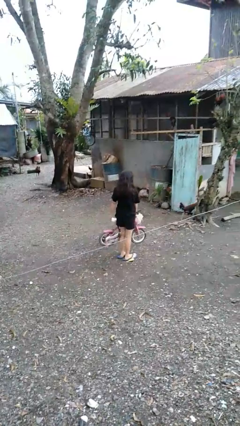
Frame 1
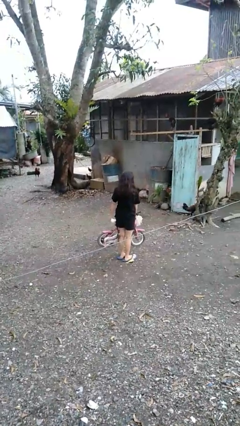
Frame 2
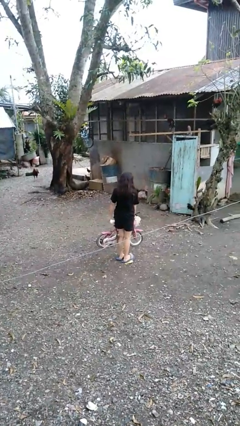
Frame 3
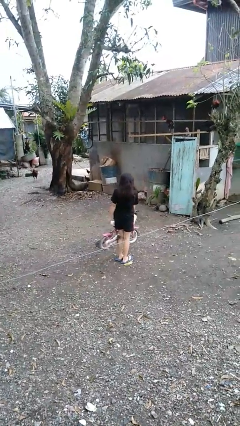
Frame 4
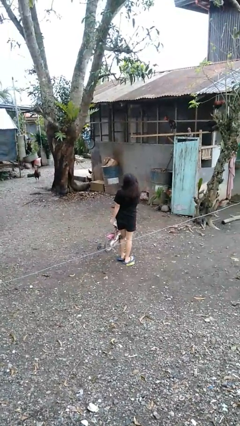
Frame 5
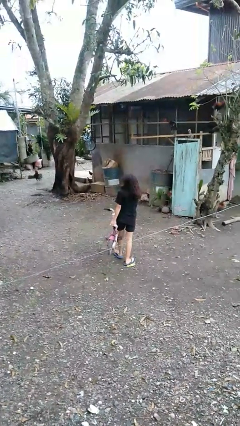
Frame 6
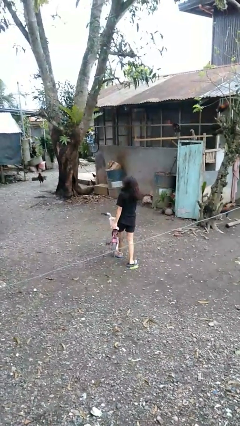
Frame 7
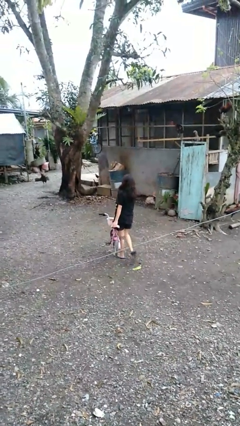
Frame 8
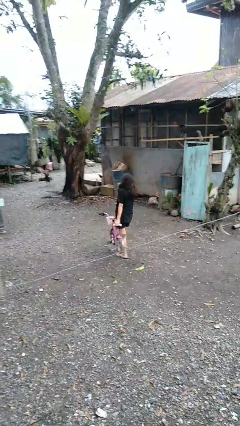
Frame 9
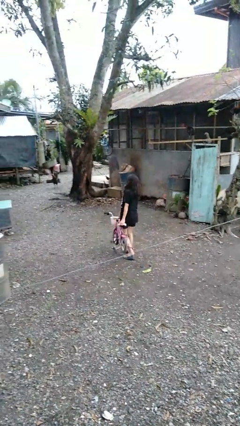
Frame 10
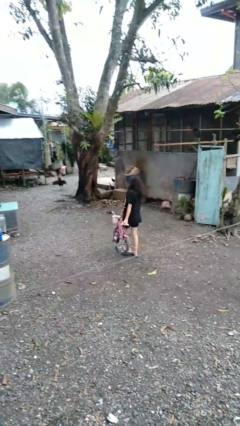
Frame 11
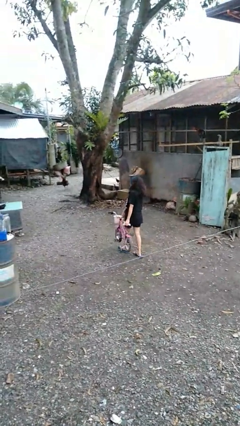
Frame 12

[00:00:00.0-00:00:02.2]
person carries bicycle

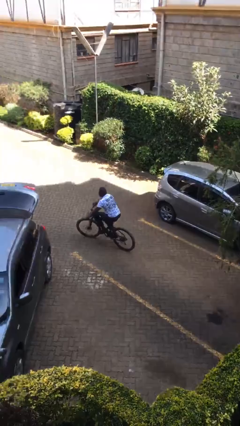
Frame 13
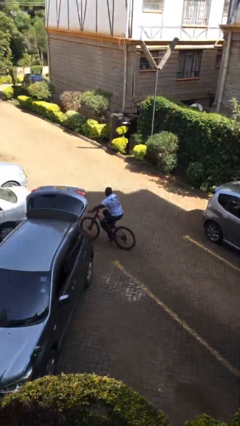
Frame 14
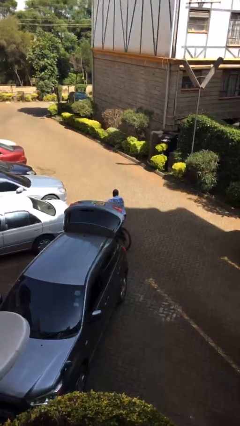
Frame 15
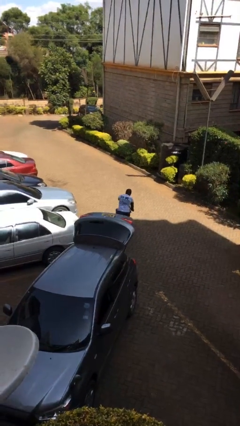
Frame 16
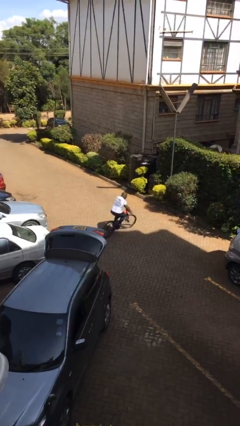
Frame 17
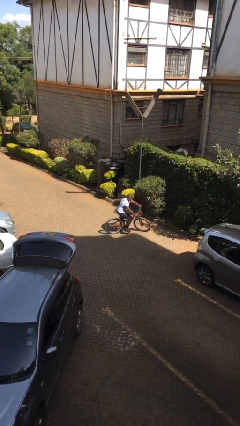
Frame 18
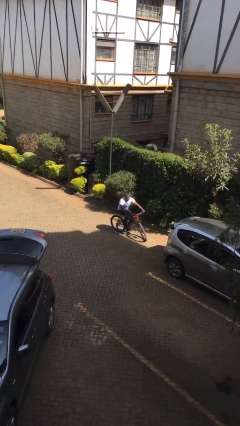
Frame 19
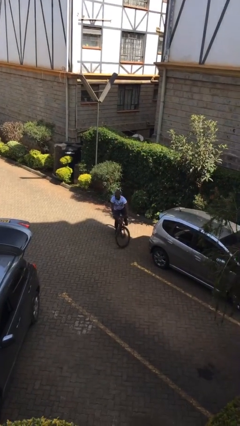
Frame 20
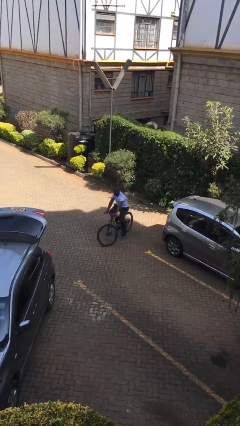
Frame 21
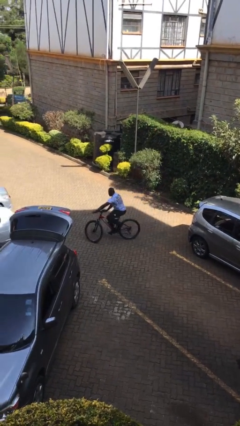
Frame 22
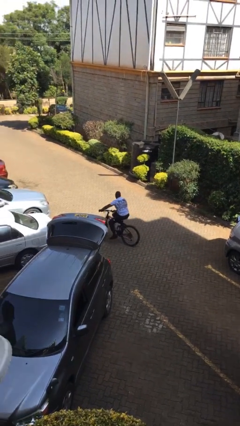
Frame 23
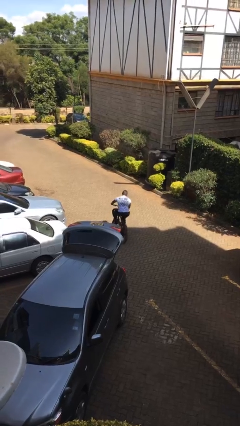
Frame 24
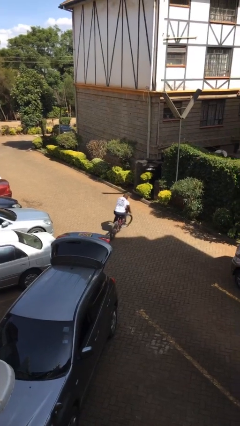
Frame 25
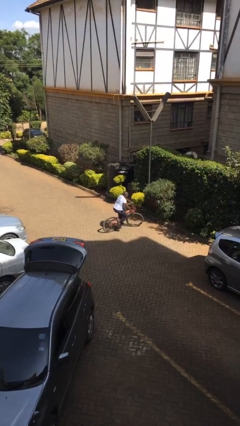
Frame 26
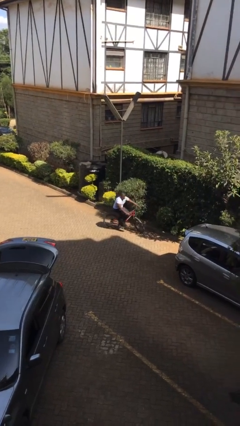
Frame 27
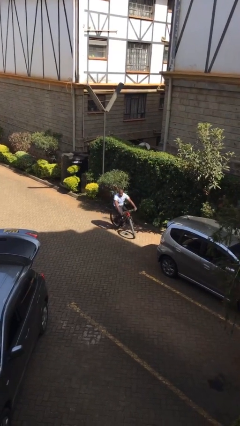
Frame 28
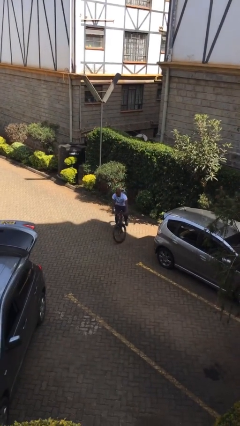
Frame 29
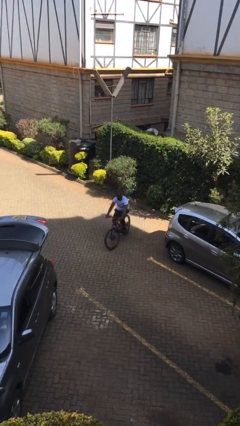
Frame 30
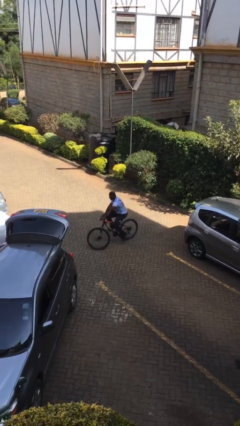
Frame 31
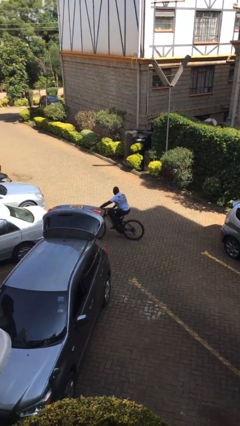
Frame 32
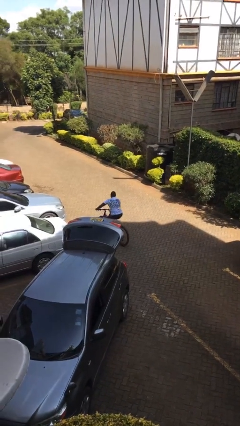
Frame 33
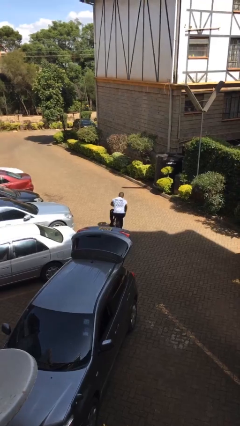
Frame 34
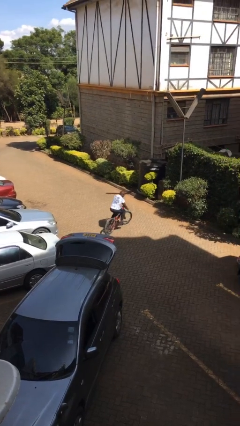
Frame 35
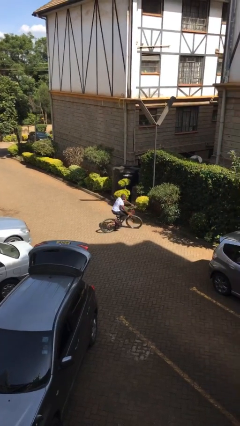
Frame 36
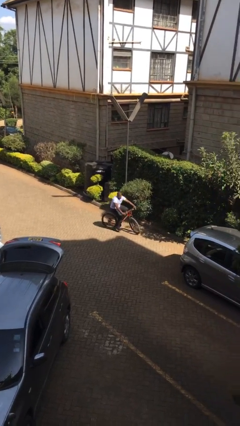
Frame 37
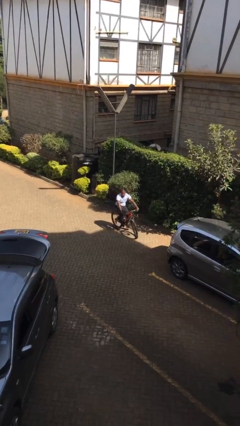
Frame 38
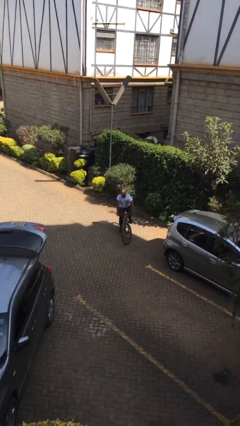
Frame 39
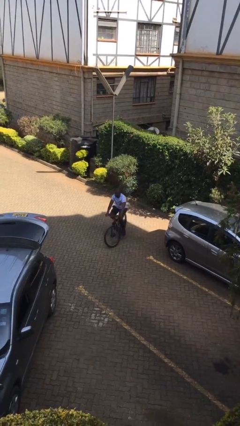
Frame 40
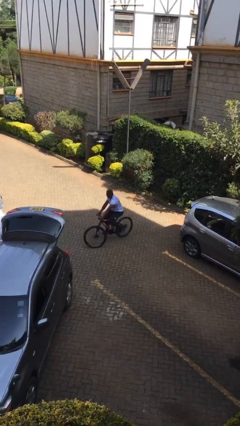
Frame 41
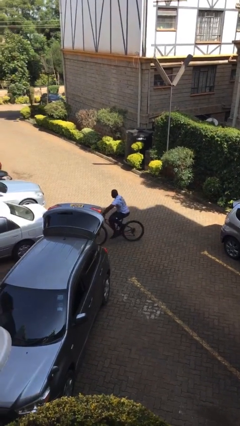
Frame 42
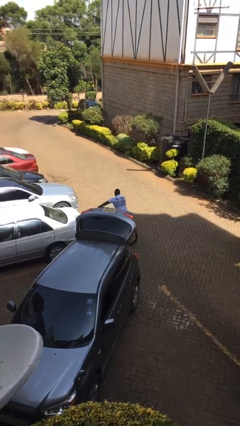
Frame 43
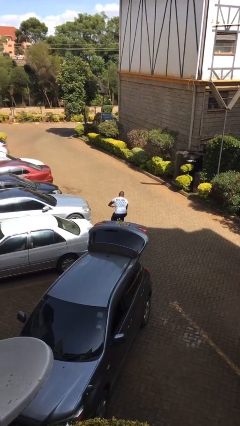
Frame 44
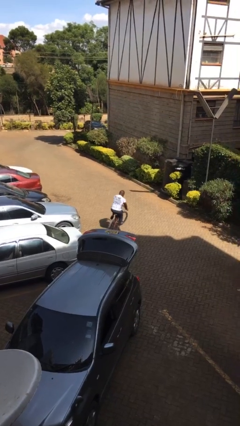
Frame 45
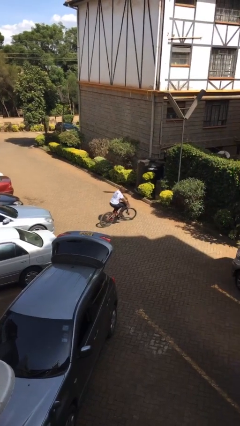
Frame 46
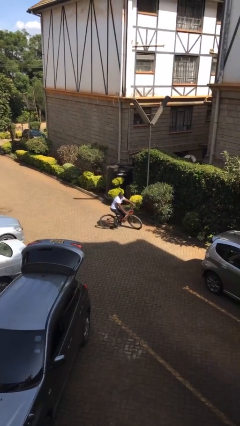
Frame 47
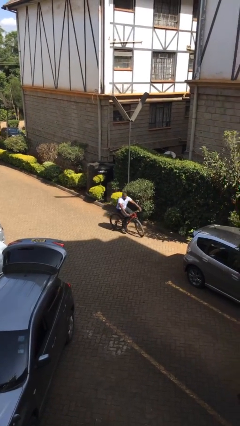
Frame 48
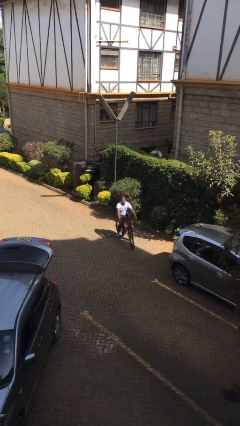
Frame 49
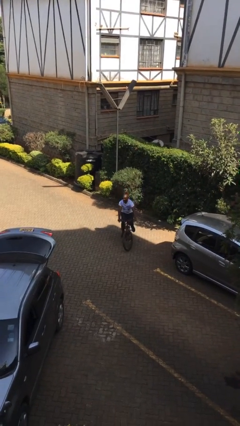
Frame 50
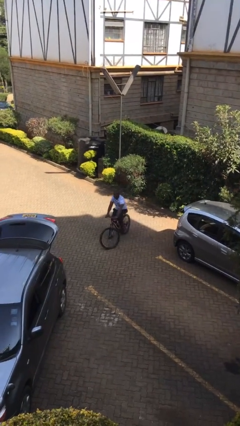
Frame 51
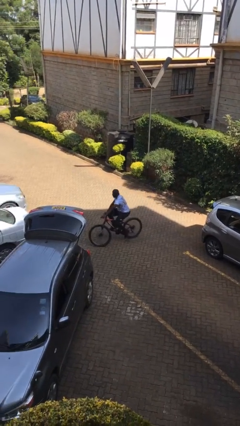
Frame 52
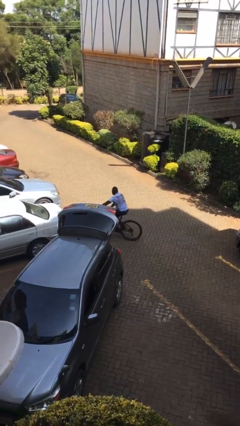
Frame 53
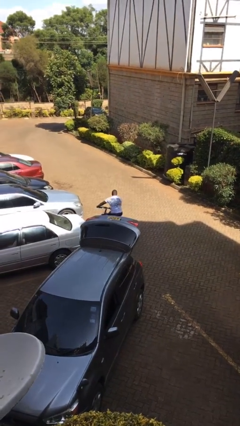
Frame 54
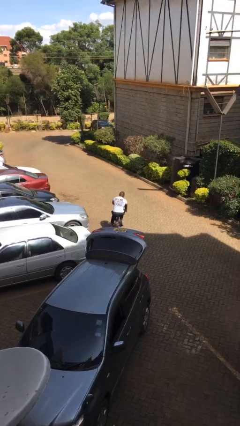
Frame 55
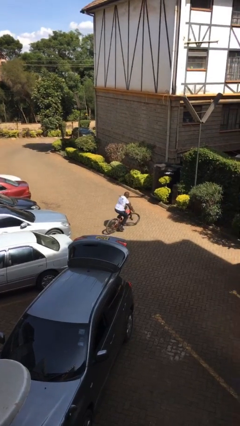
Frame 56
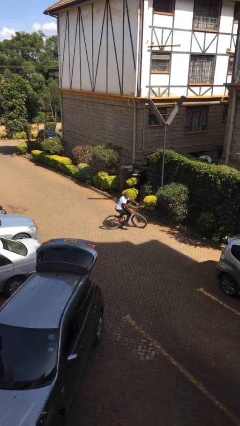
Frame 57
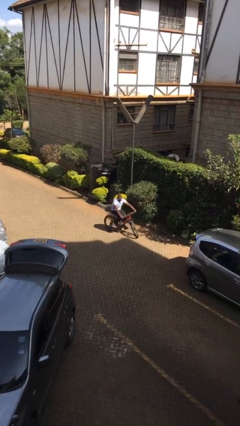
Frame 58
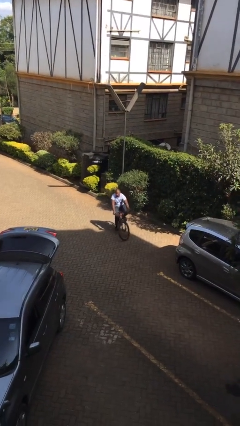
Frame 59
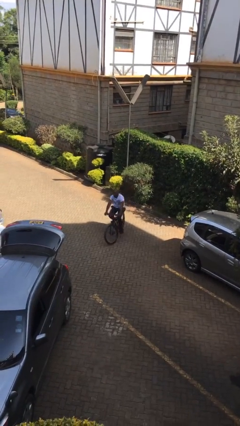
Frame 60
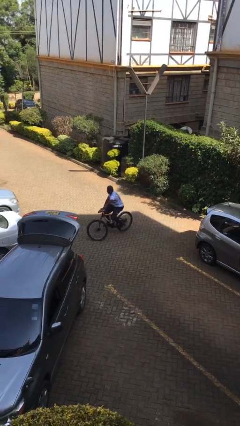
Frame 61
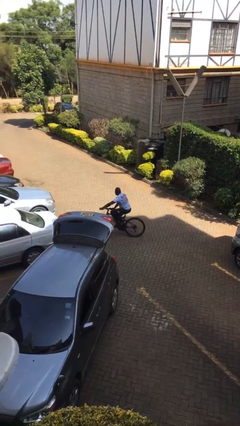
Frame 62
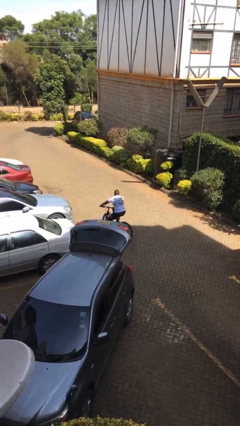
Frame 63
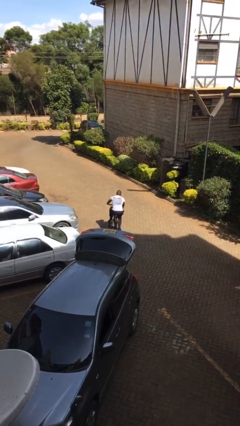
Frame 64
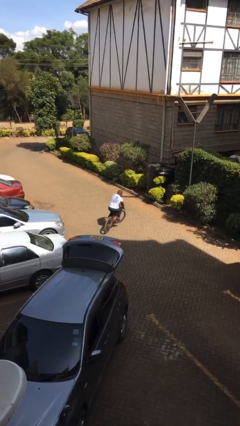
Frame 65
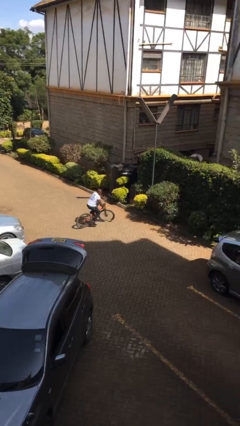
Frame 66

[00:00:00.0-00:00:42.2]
person rides bicycle

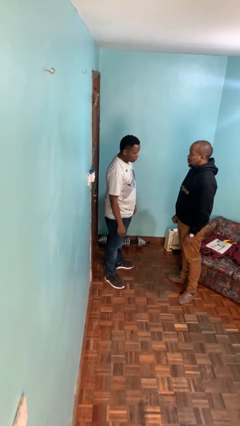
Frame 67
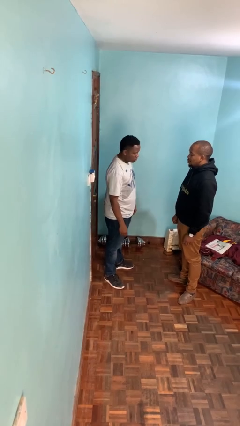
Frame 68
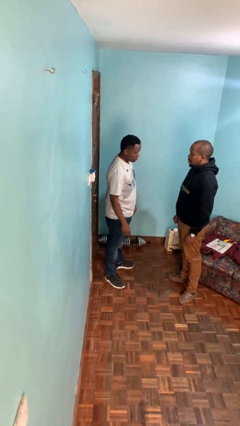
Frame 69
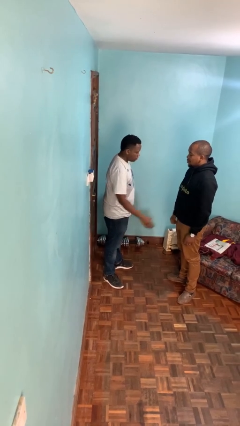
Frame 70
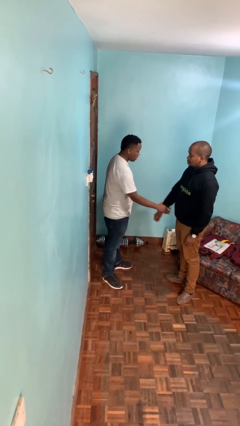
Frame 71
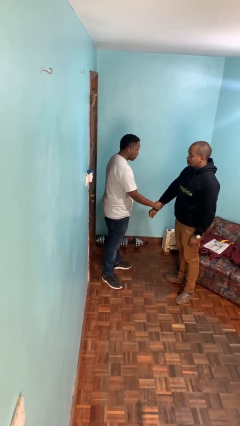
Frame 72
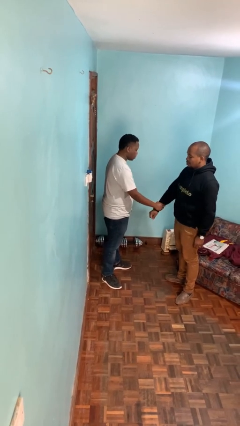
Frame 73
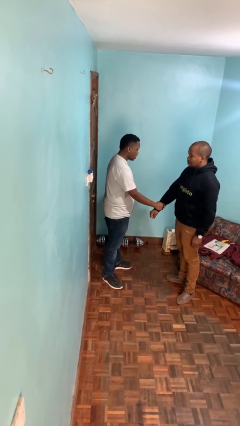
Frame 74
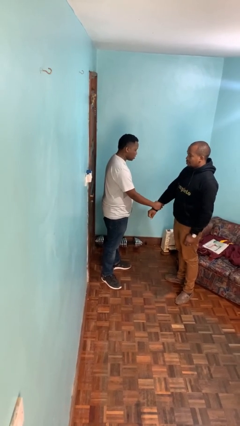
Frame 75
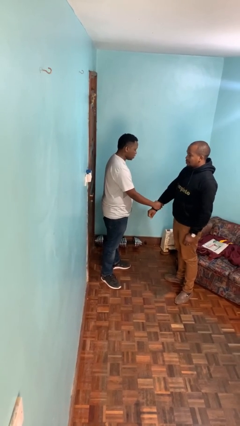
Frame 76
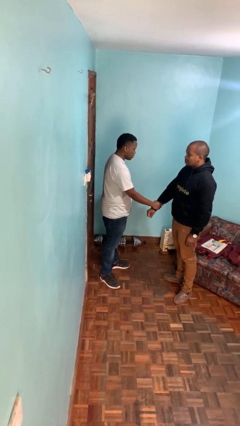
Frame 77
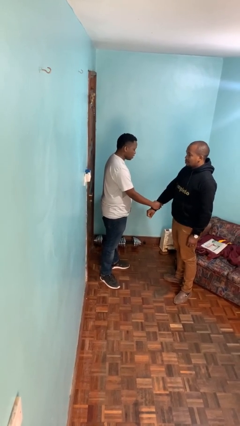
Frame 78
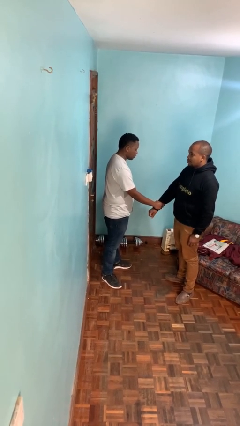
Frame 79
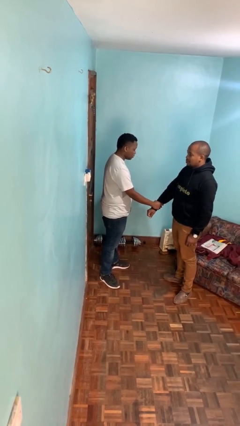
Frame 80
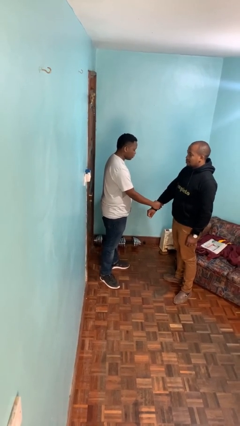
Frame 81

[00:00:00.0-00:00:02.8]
person grabs person by forearm

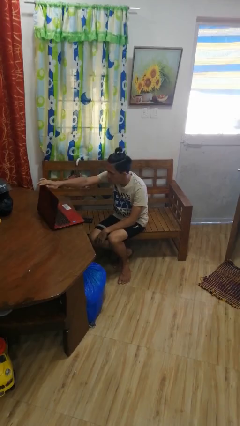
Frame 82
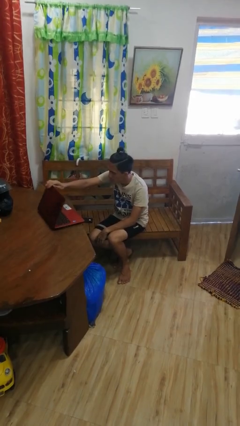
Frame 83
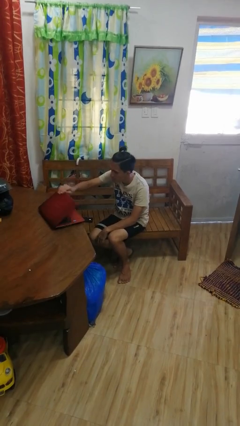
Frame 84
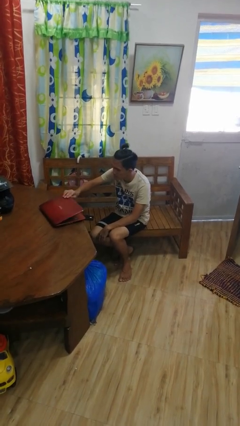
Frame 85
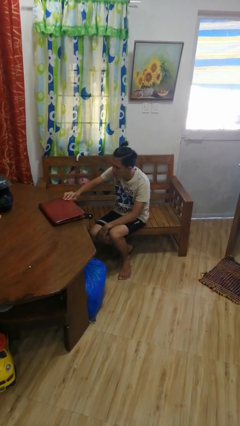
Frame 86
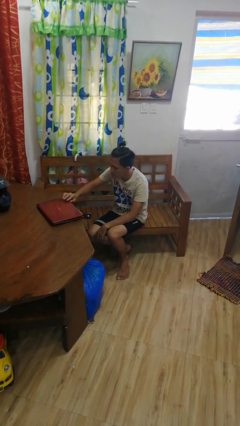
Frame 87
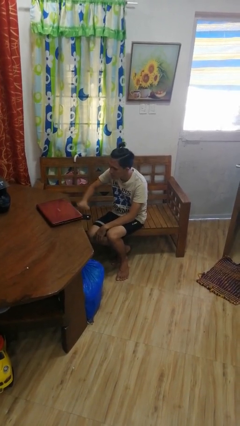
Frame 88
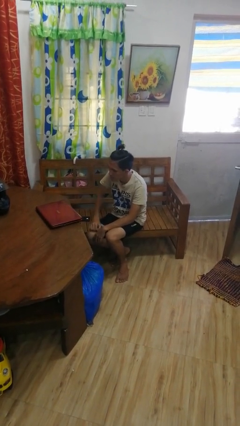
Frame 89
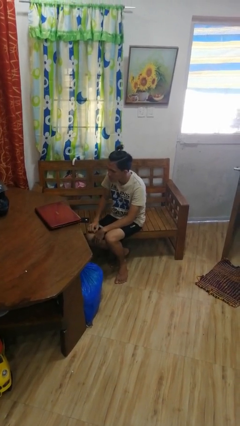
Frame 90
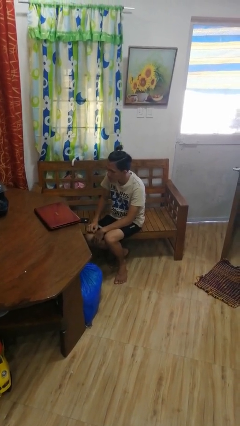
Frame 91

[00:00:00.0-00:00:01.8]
person closes laptop

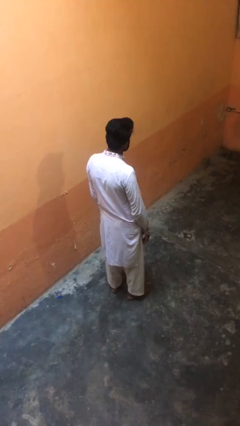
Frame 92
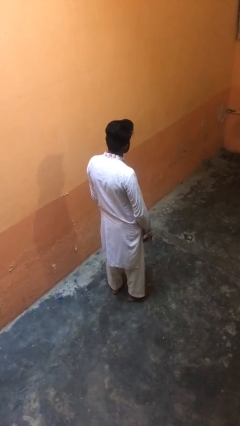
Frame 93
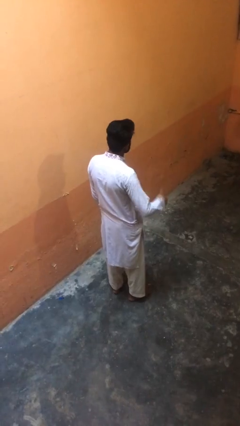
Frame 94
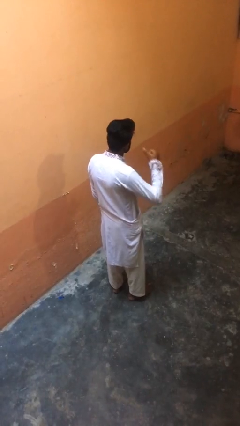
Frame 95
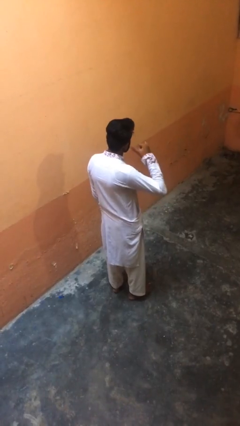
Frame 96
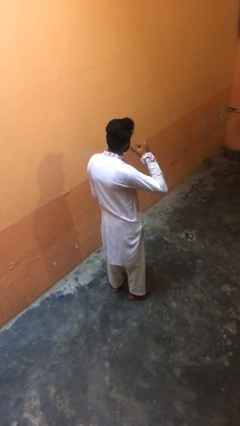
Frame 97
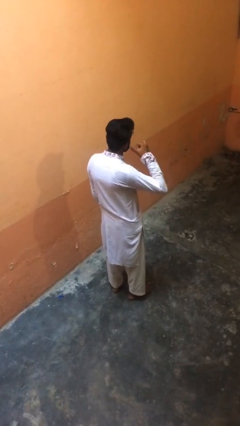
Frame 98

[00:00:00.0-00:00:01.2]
person gestures call me
